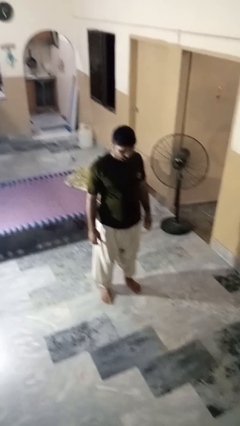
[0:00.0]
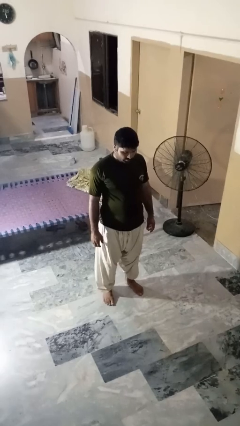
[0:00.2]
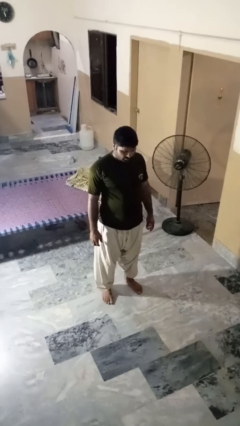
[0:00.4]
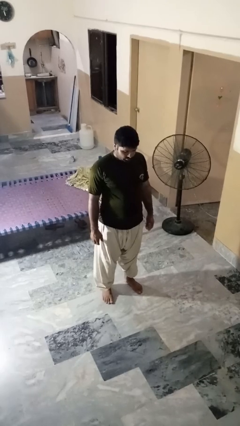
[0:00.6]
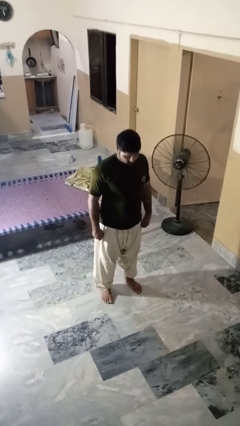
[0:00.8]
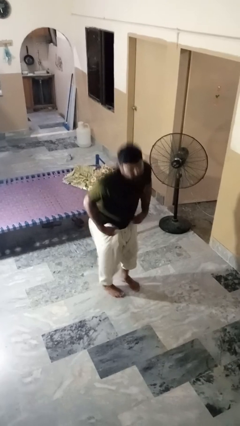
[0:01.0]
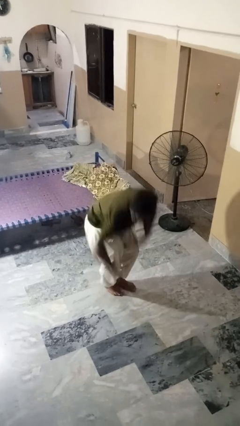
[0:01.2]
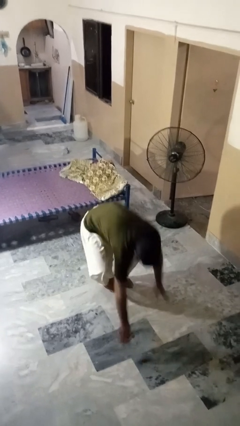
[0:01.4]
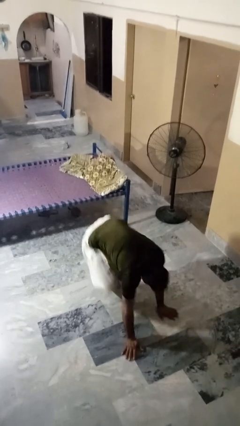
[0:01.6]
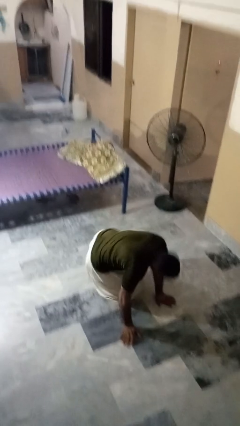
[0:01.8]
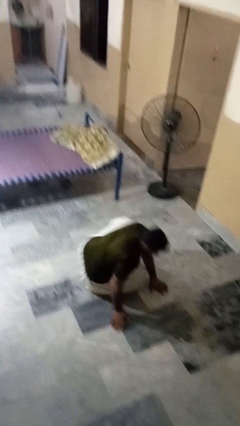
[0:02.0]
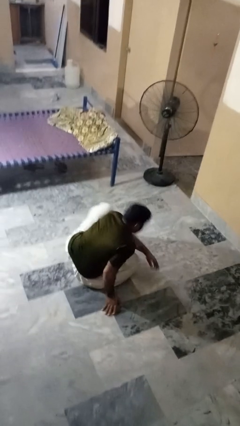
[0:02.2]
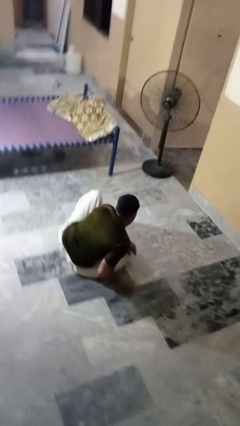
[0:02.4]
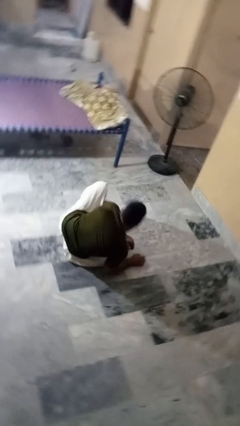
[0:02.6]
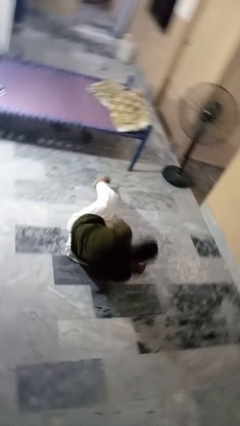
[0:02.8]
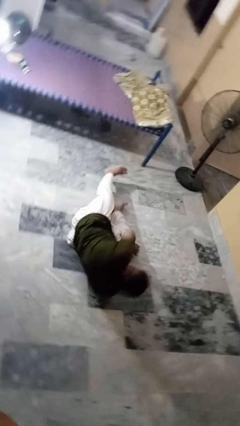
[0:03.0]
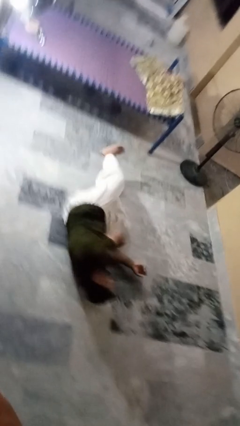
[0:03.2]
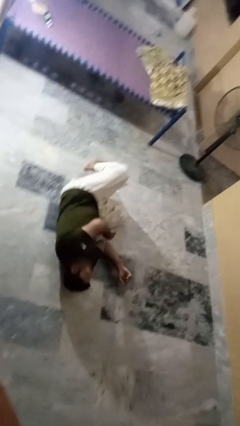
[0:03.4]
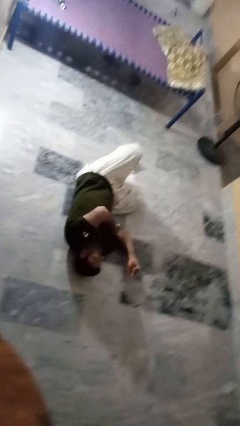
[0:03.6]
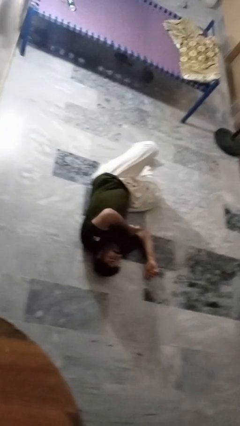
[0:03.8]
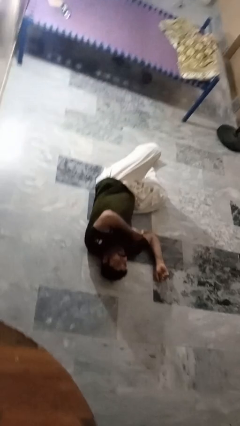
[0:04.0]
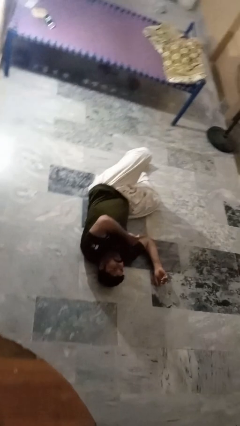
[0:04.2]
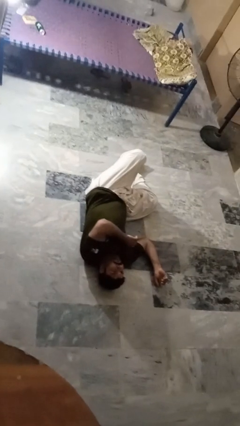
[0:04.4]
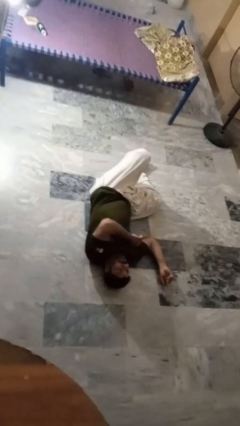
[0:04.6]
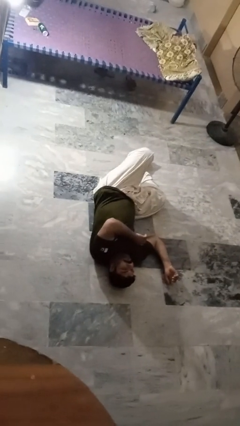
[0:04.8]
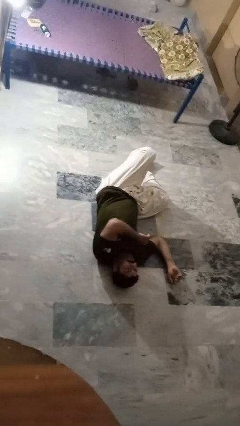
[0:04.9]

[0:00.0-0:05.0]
person falls while standing

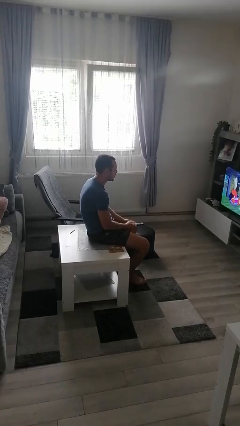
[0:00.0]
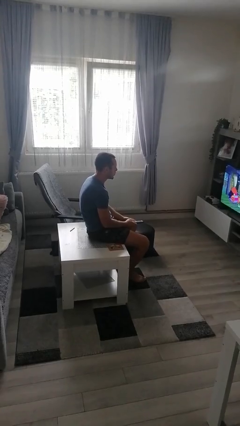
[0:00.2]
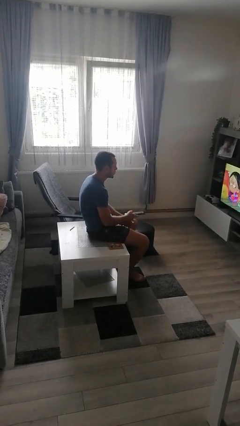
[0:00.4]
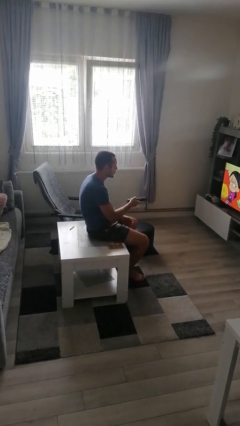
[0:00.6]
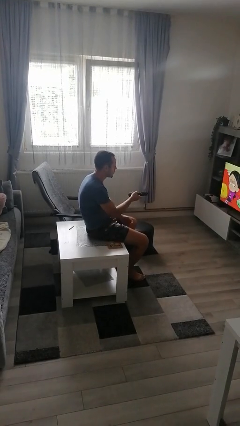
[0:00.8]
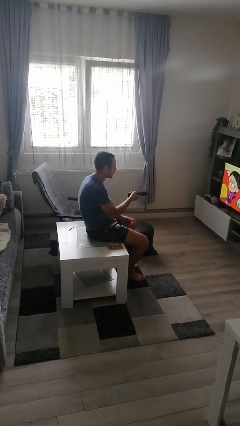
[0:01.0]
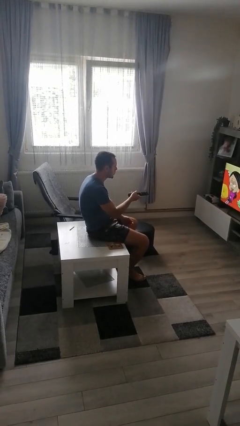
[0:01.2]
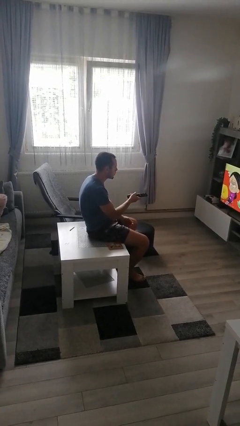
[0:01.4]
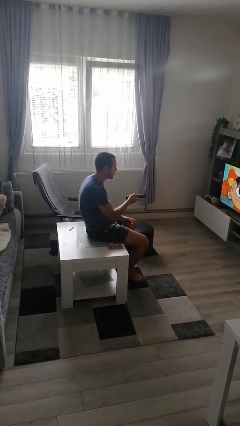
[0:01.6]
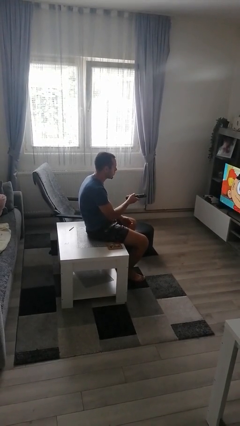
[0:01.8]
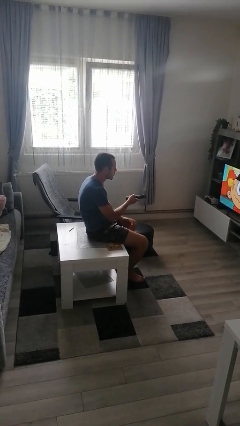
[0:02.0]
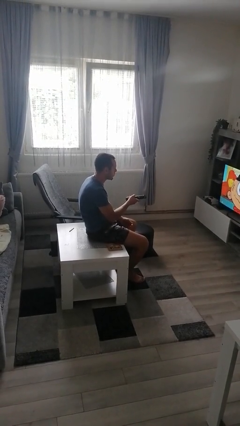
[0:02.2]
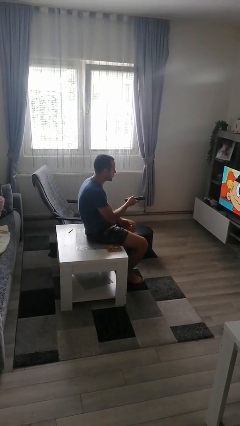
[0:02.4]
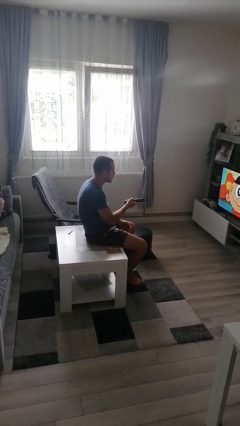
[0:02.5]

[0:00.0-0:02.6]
person uses television remote

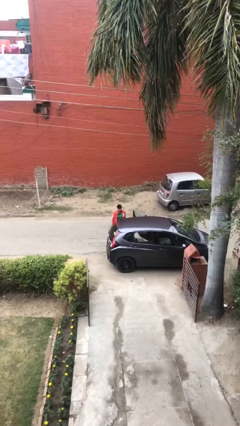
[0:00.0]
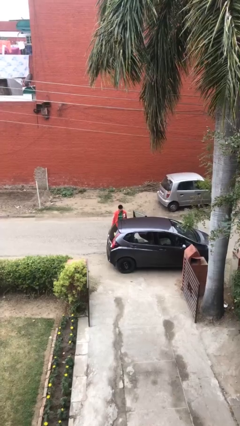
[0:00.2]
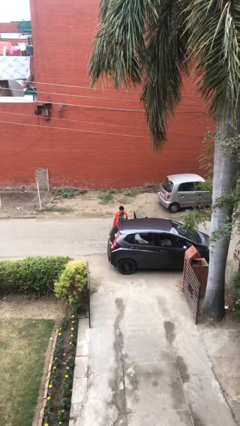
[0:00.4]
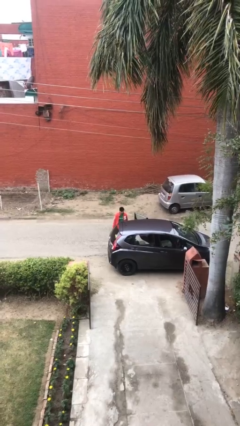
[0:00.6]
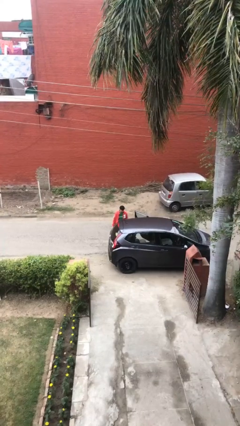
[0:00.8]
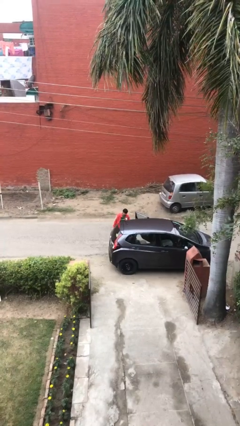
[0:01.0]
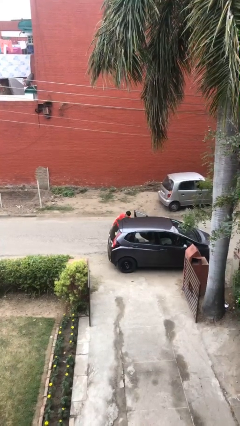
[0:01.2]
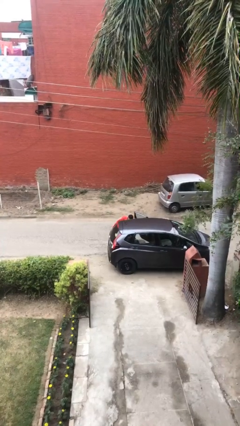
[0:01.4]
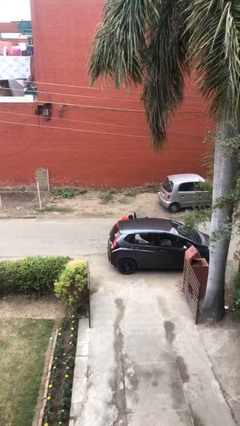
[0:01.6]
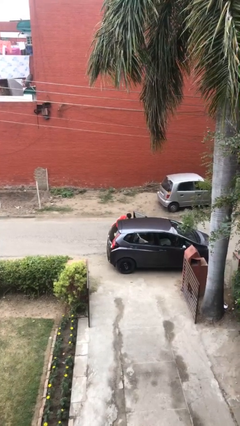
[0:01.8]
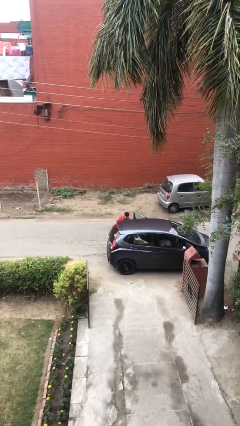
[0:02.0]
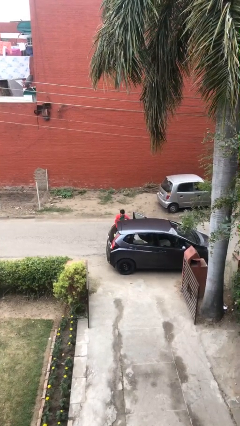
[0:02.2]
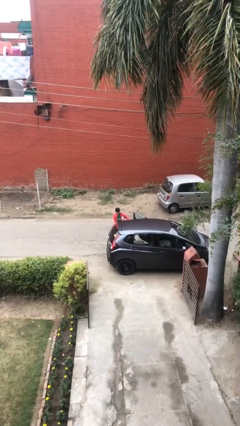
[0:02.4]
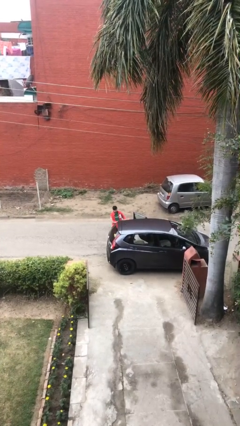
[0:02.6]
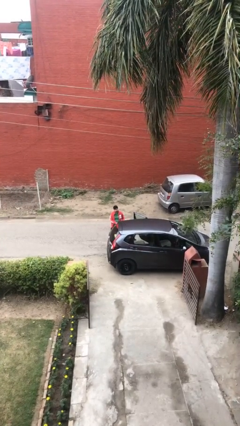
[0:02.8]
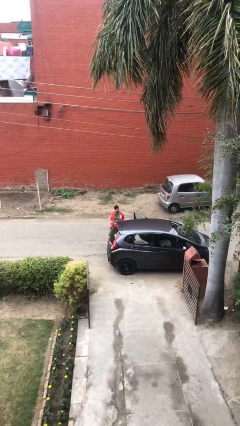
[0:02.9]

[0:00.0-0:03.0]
person unloads car

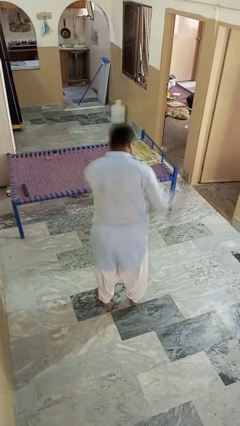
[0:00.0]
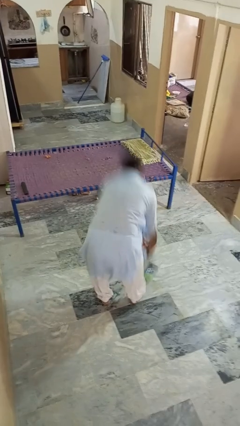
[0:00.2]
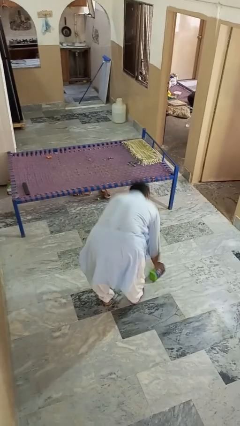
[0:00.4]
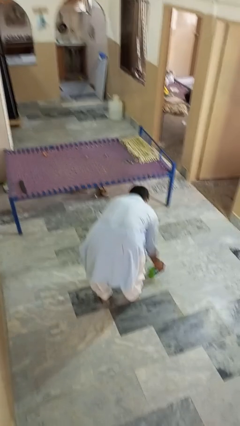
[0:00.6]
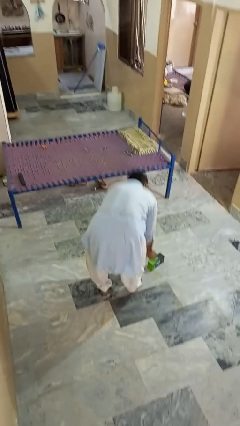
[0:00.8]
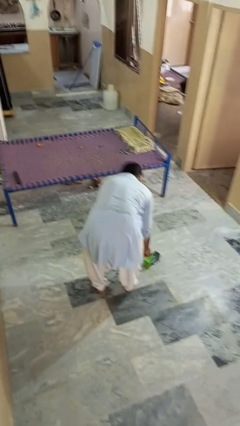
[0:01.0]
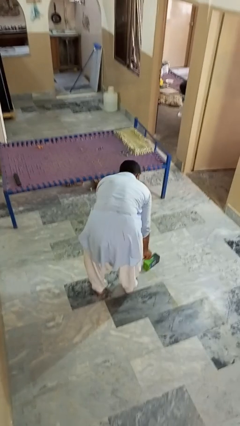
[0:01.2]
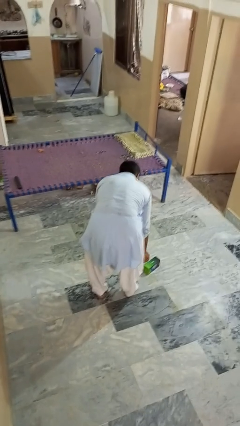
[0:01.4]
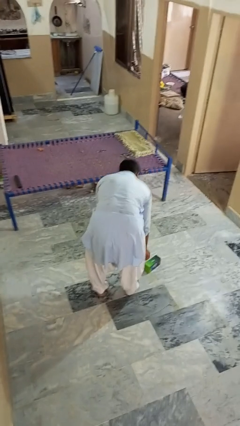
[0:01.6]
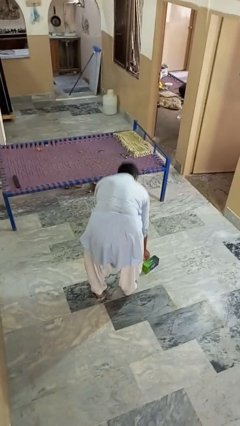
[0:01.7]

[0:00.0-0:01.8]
person catches dropped object

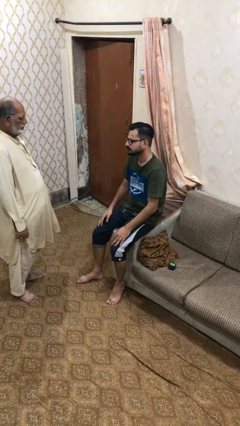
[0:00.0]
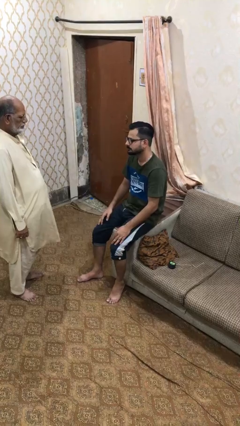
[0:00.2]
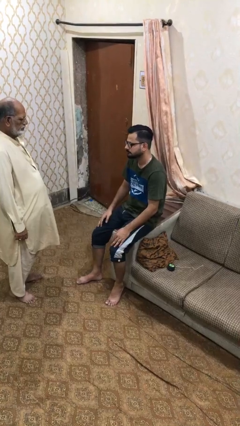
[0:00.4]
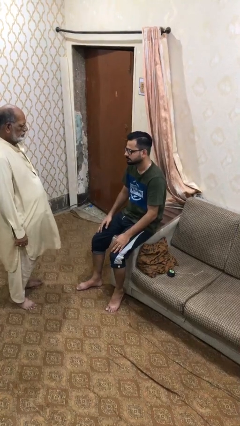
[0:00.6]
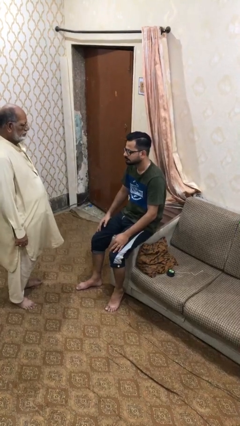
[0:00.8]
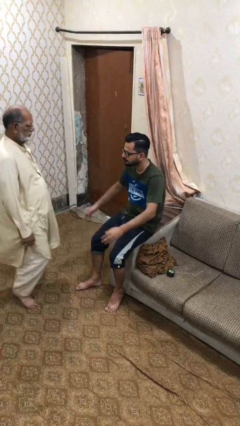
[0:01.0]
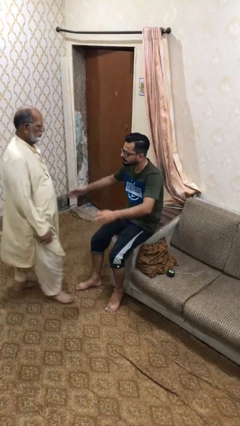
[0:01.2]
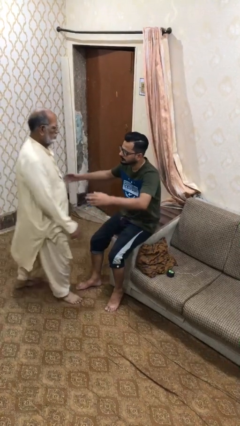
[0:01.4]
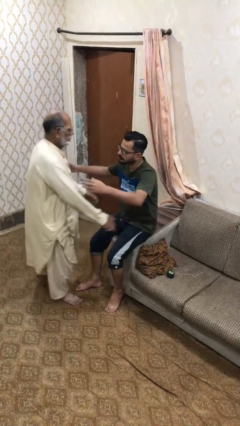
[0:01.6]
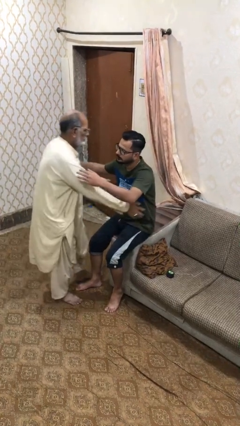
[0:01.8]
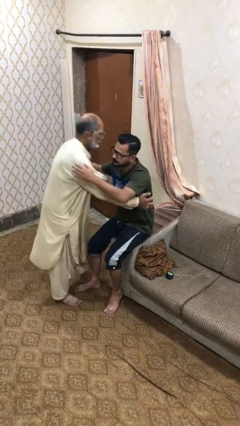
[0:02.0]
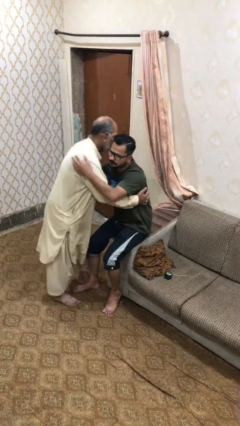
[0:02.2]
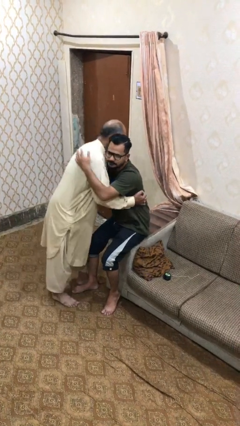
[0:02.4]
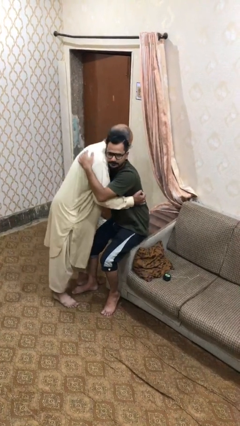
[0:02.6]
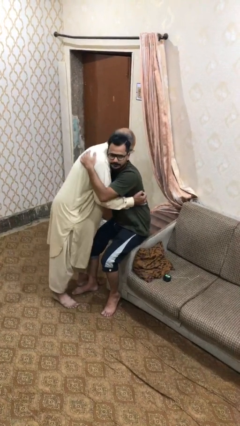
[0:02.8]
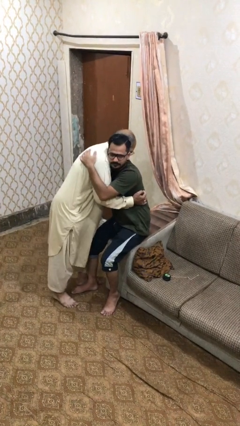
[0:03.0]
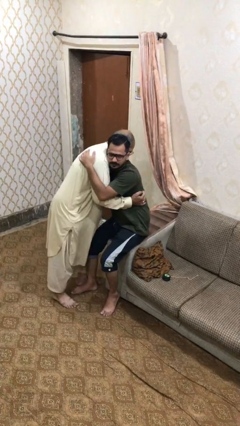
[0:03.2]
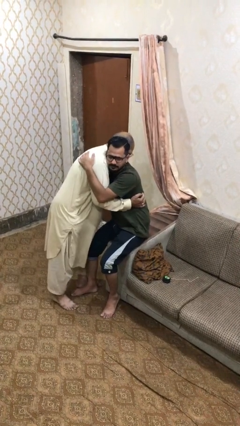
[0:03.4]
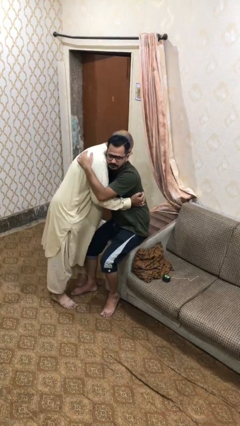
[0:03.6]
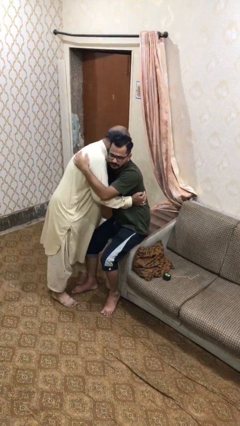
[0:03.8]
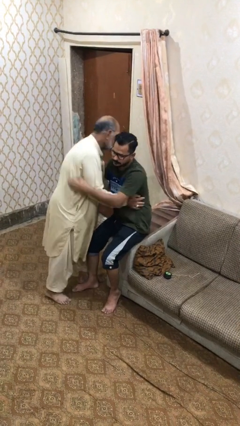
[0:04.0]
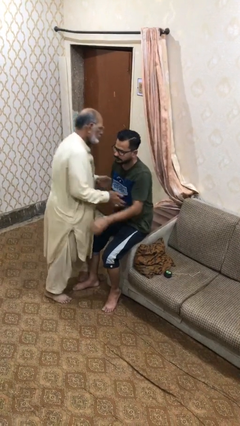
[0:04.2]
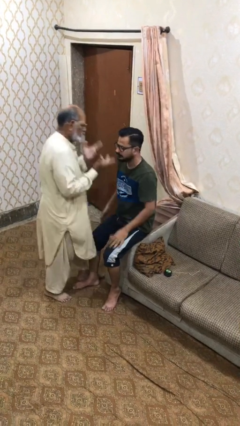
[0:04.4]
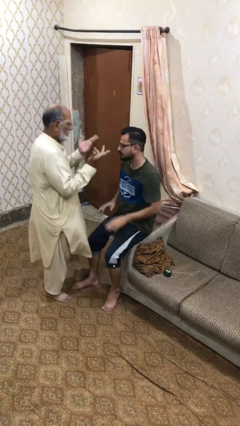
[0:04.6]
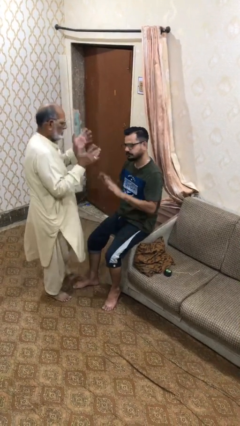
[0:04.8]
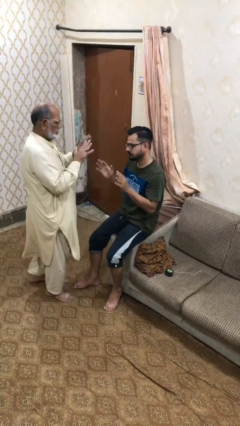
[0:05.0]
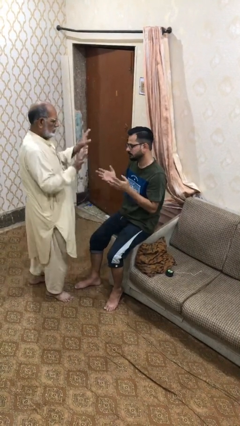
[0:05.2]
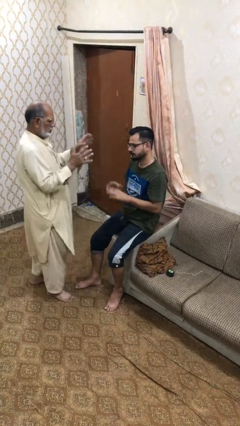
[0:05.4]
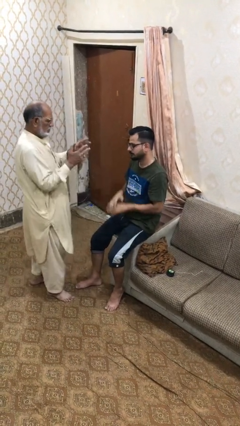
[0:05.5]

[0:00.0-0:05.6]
person embraces person
